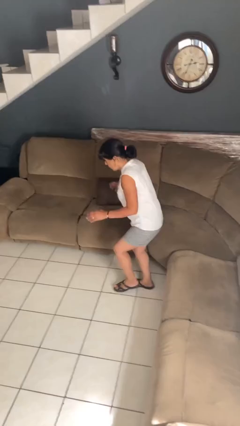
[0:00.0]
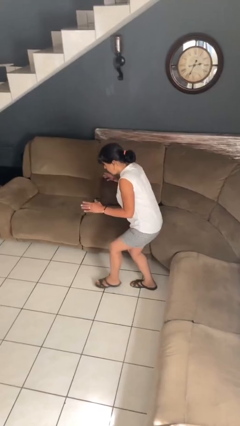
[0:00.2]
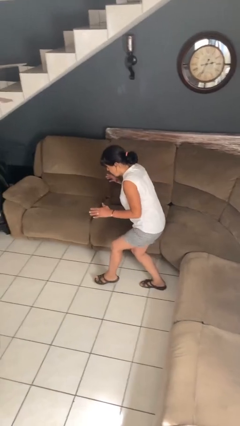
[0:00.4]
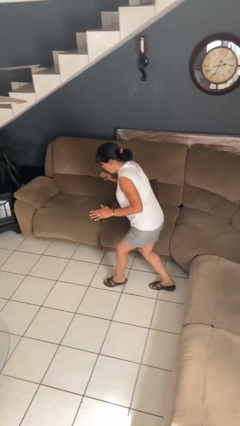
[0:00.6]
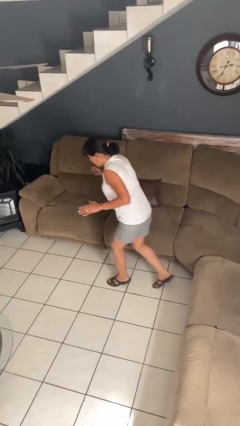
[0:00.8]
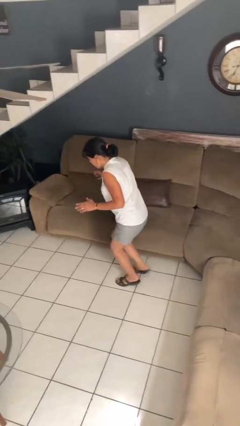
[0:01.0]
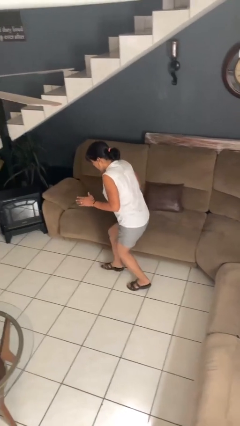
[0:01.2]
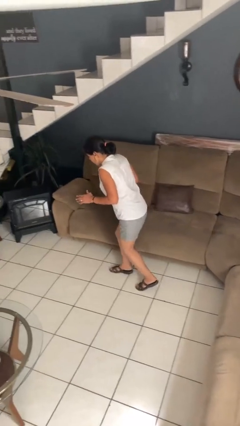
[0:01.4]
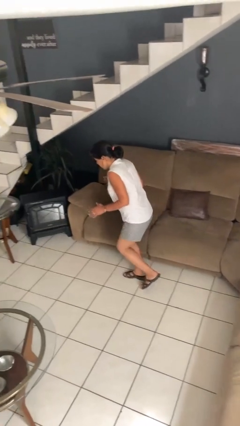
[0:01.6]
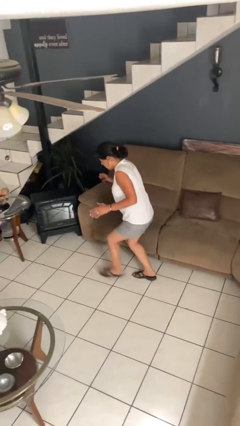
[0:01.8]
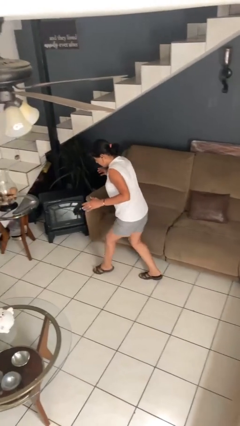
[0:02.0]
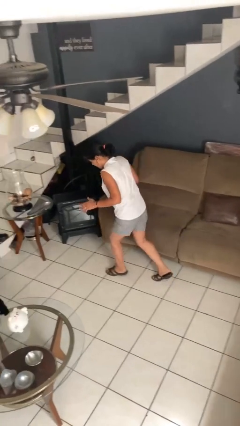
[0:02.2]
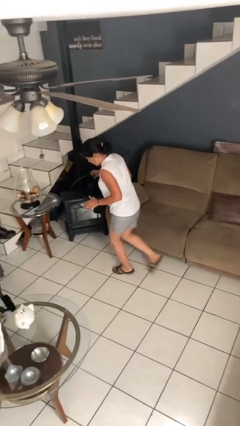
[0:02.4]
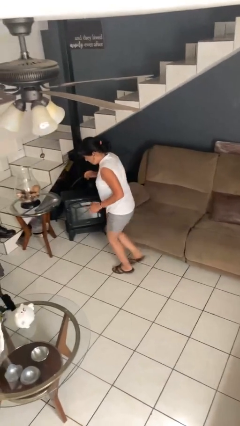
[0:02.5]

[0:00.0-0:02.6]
person walks tiptoe

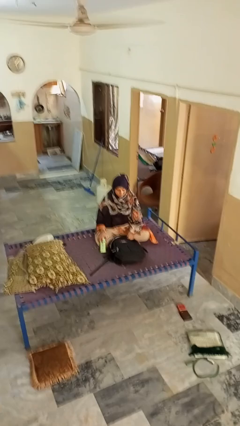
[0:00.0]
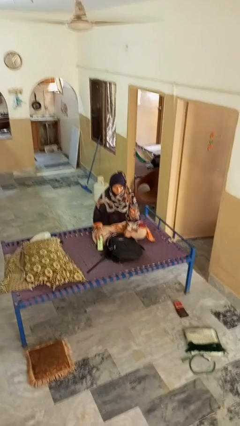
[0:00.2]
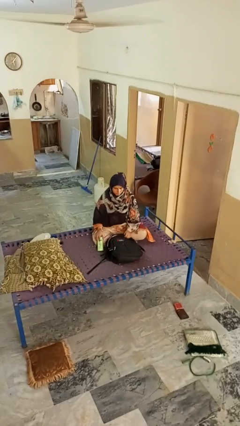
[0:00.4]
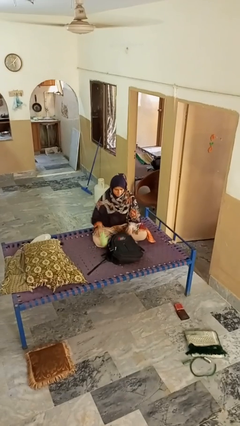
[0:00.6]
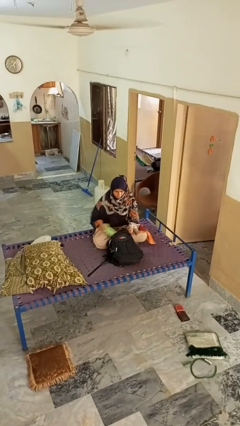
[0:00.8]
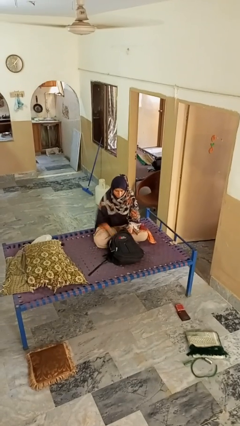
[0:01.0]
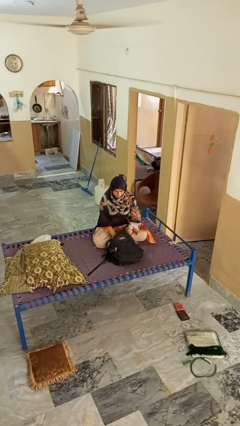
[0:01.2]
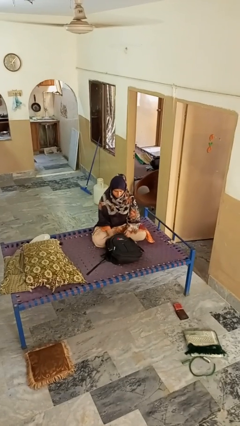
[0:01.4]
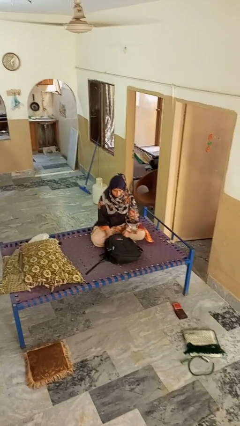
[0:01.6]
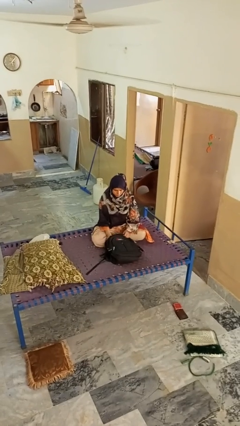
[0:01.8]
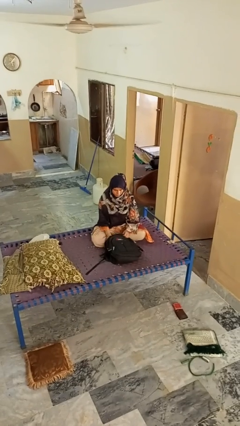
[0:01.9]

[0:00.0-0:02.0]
person puts object into bag

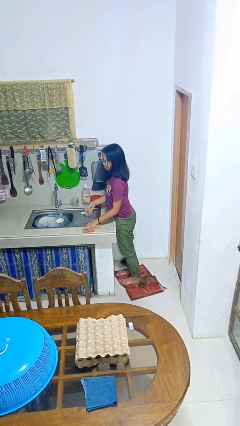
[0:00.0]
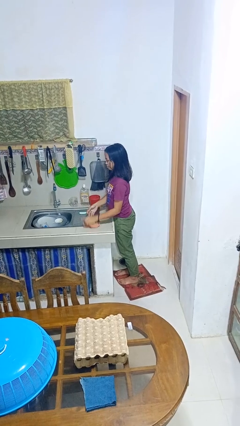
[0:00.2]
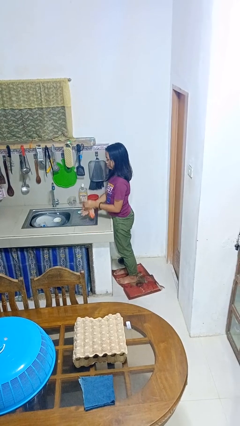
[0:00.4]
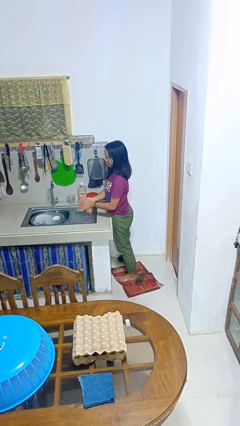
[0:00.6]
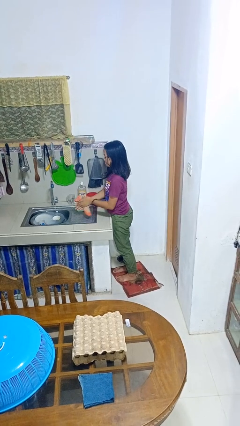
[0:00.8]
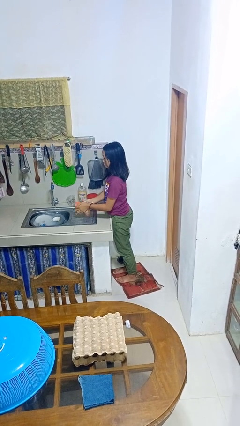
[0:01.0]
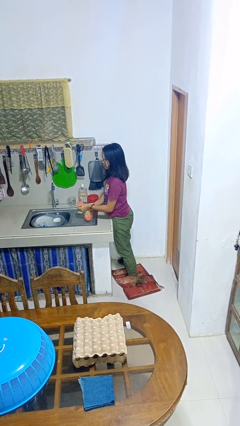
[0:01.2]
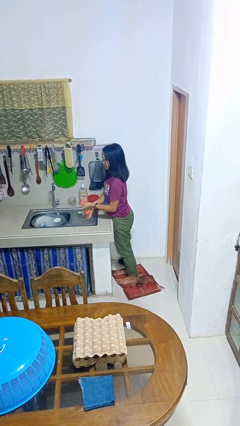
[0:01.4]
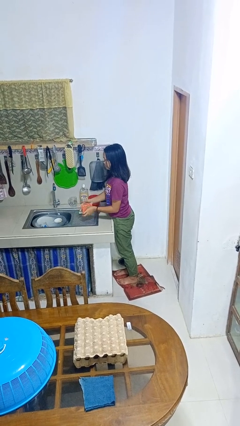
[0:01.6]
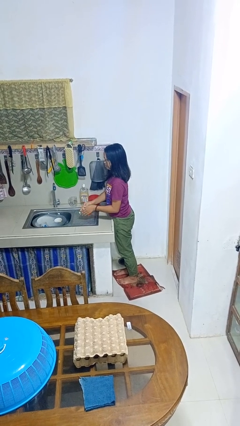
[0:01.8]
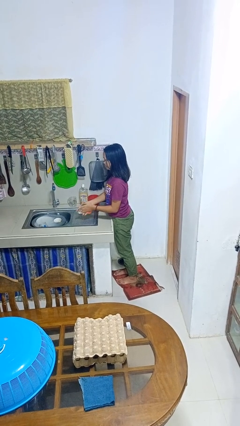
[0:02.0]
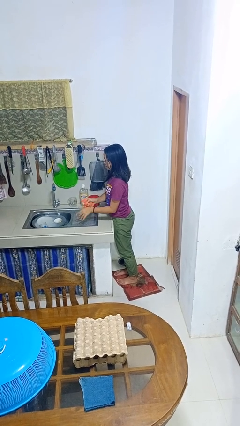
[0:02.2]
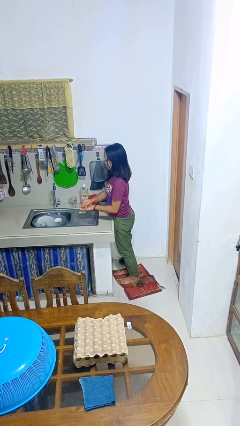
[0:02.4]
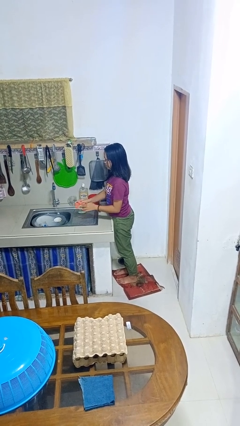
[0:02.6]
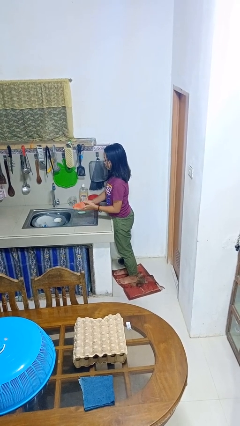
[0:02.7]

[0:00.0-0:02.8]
person dries hands with towel

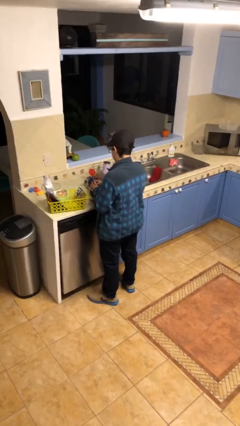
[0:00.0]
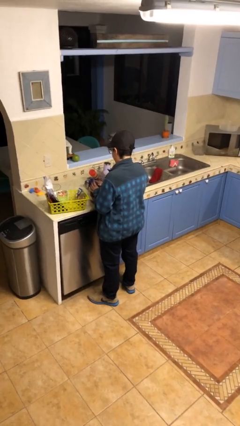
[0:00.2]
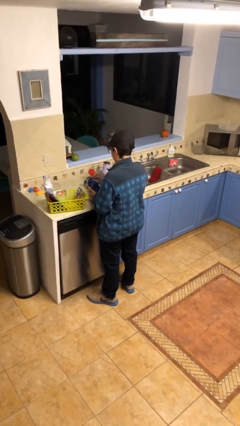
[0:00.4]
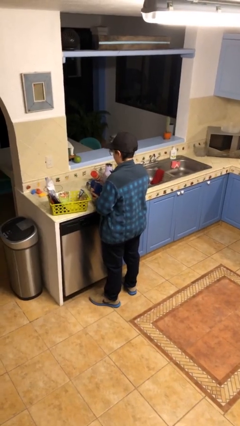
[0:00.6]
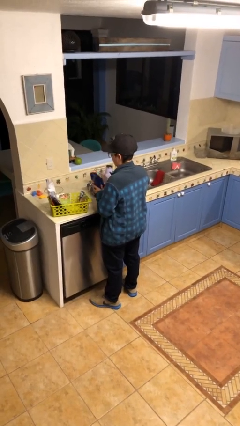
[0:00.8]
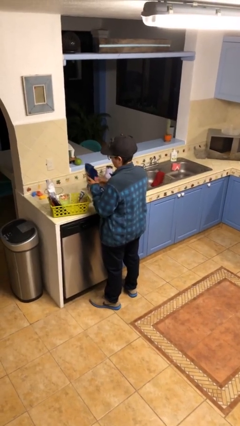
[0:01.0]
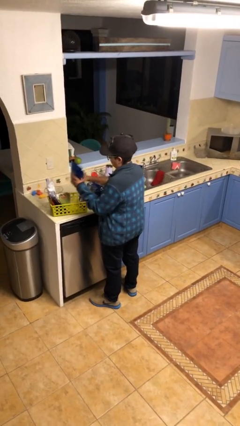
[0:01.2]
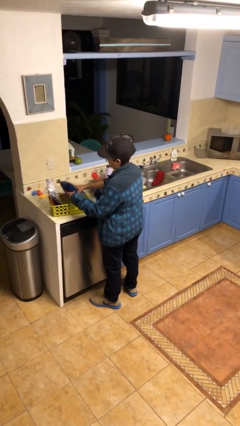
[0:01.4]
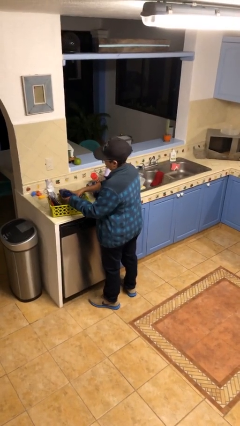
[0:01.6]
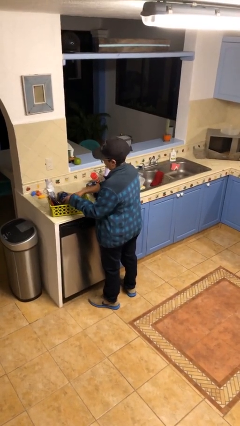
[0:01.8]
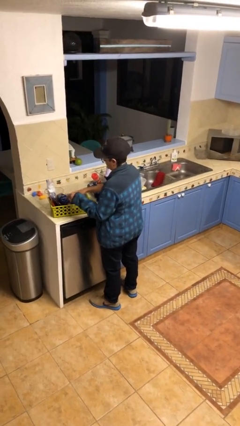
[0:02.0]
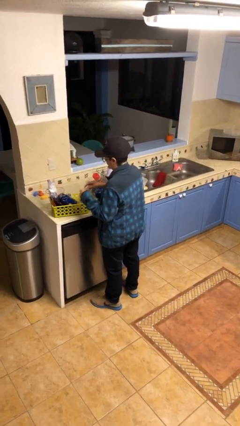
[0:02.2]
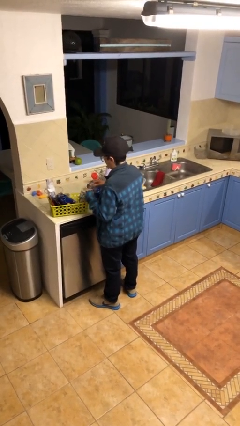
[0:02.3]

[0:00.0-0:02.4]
person puts object into basket

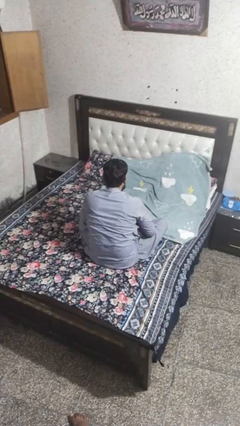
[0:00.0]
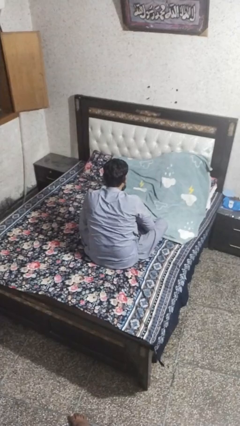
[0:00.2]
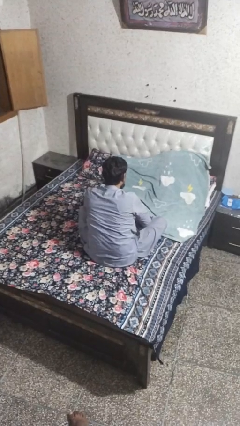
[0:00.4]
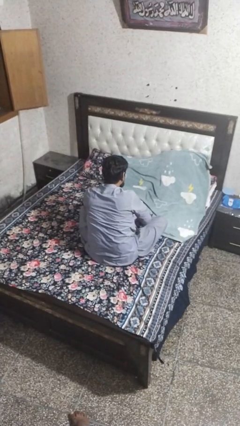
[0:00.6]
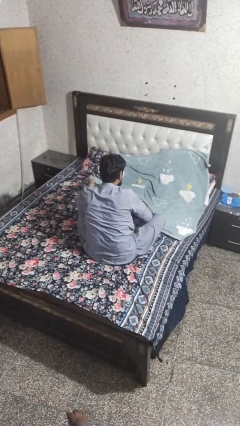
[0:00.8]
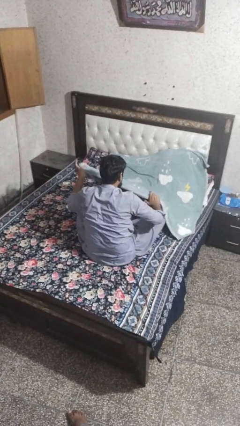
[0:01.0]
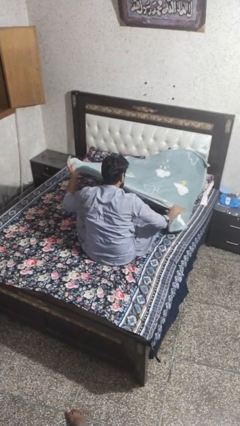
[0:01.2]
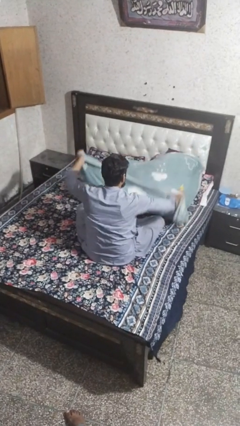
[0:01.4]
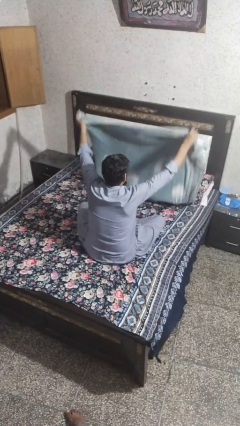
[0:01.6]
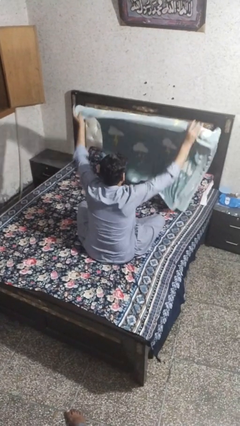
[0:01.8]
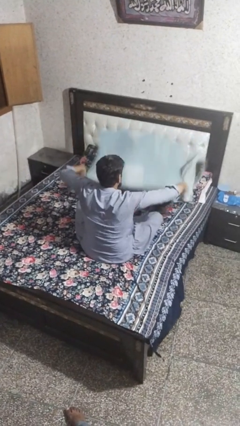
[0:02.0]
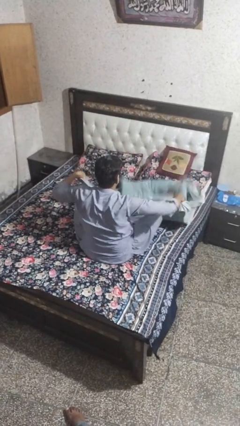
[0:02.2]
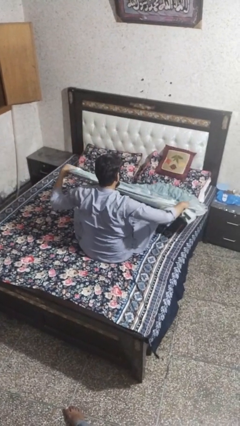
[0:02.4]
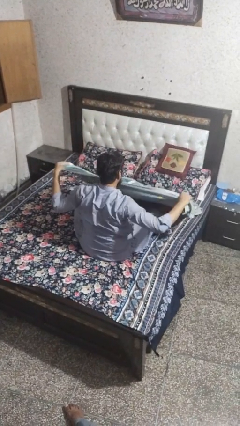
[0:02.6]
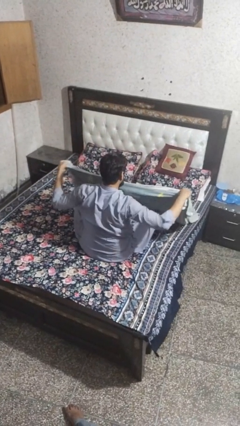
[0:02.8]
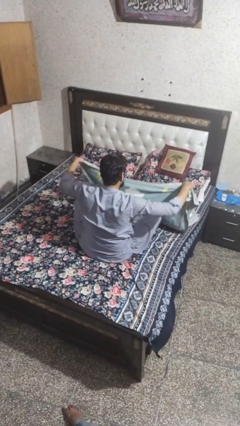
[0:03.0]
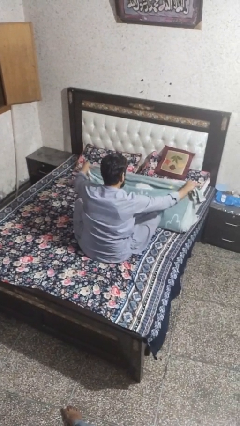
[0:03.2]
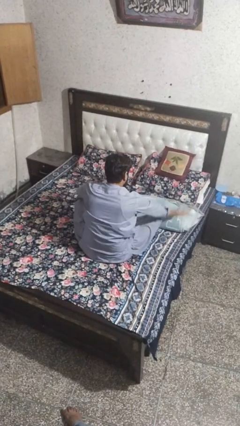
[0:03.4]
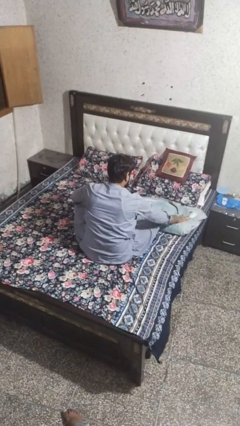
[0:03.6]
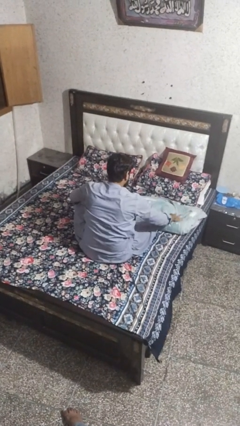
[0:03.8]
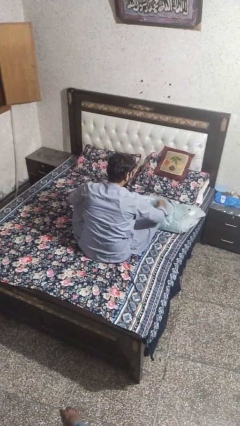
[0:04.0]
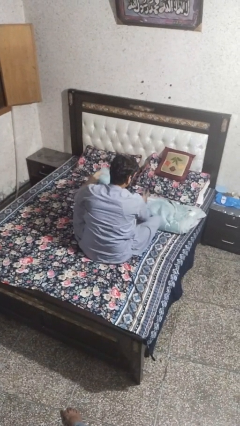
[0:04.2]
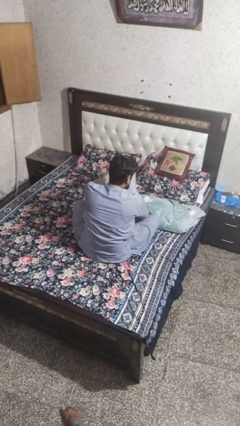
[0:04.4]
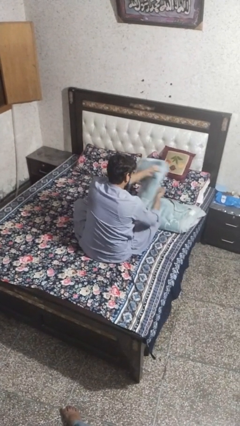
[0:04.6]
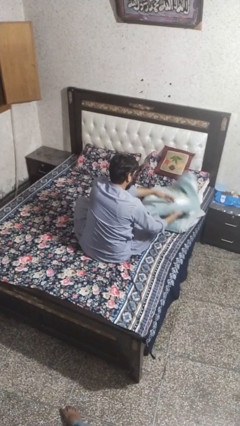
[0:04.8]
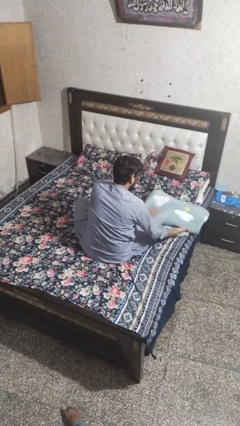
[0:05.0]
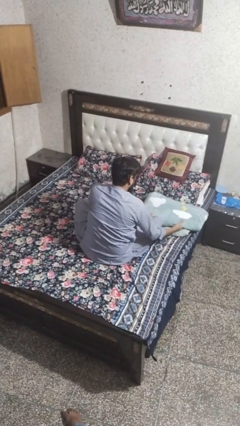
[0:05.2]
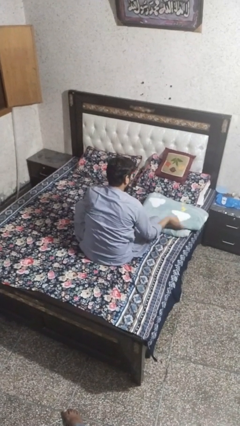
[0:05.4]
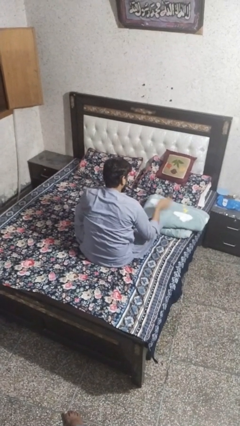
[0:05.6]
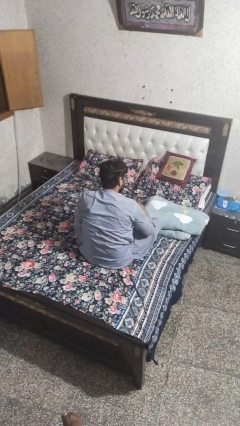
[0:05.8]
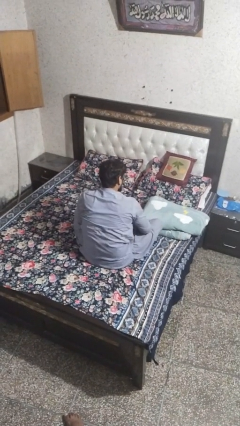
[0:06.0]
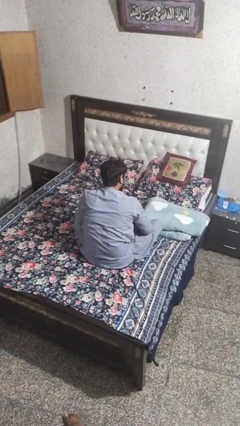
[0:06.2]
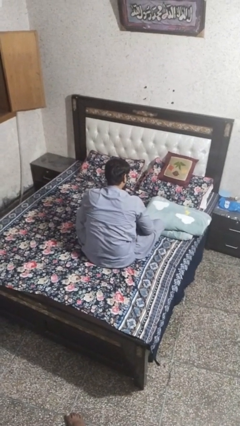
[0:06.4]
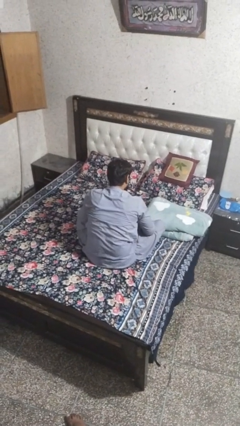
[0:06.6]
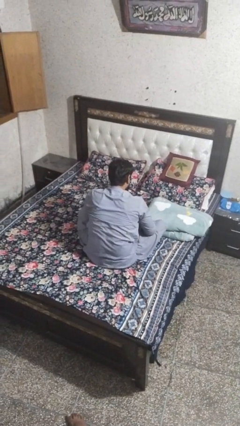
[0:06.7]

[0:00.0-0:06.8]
person folds blanket

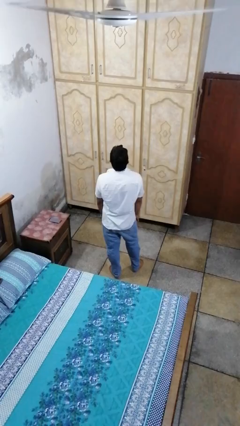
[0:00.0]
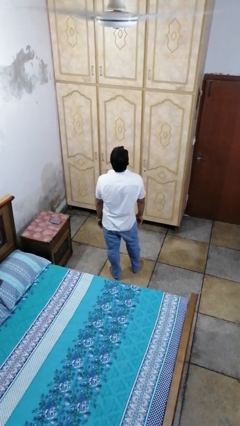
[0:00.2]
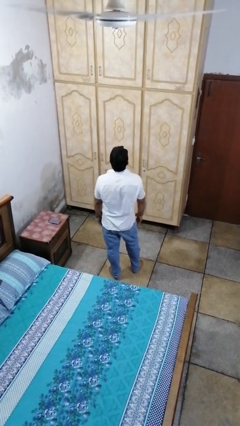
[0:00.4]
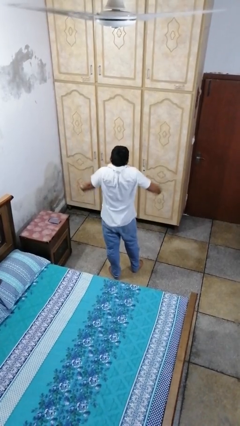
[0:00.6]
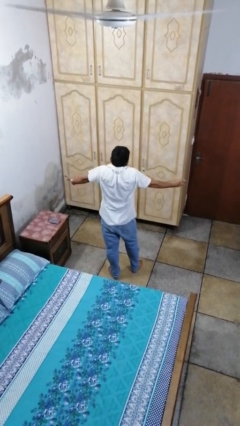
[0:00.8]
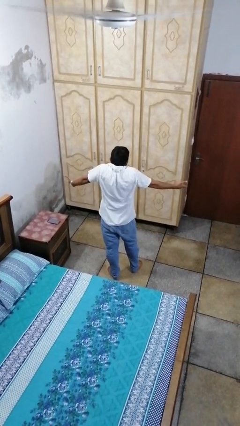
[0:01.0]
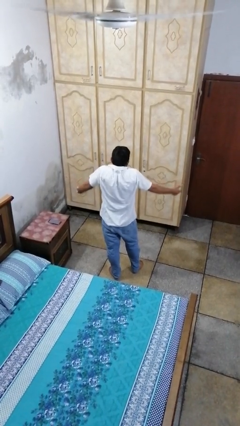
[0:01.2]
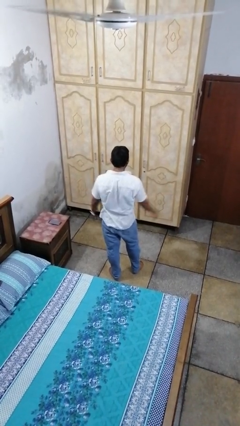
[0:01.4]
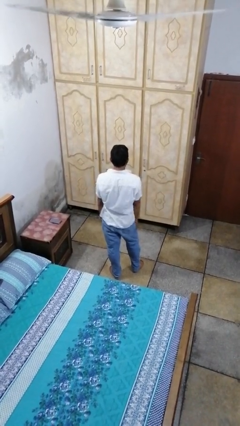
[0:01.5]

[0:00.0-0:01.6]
person shrugs
